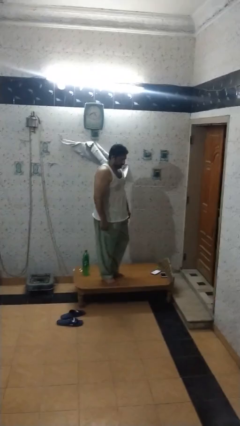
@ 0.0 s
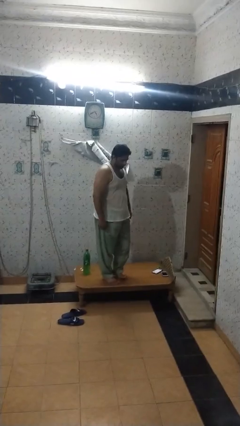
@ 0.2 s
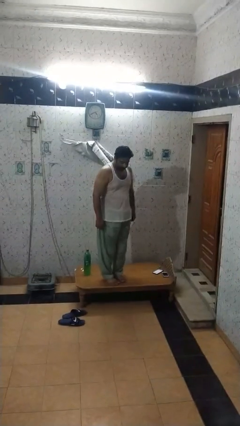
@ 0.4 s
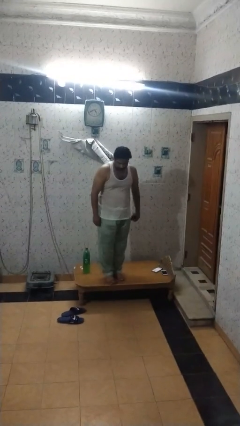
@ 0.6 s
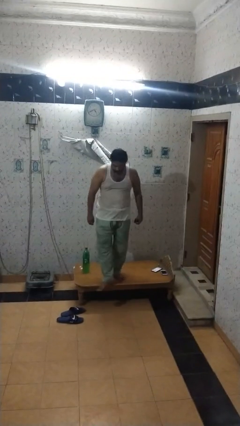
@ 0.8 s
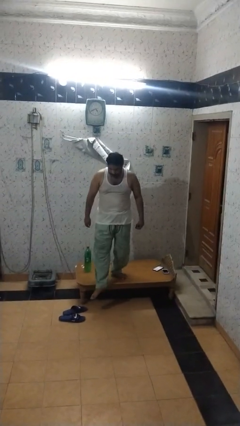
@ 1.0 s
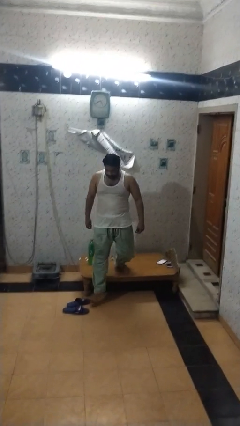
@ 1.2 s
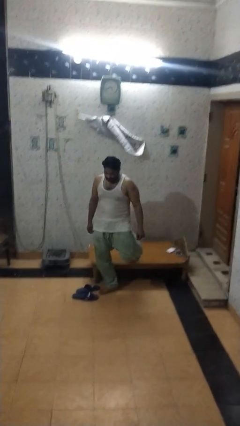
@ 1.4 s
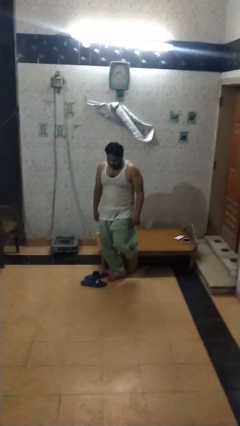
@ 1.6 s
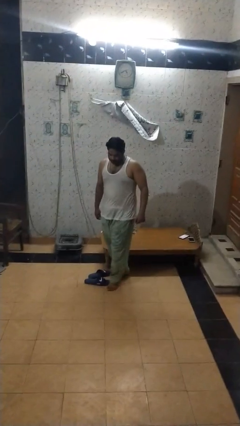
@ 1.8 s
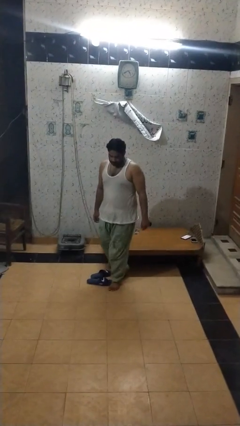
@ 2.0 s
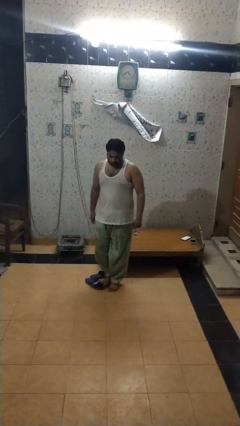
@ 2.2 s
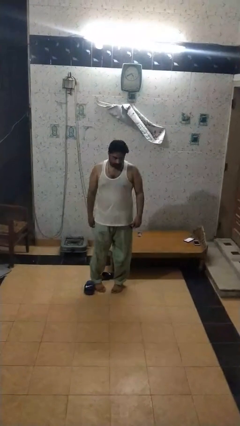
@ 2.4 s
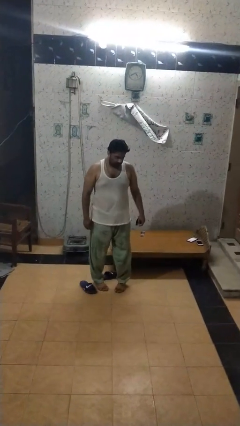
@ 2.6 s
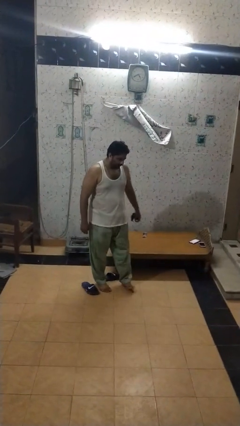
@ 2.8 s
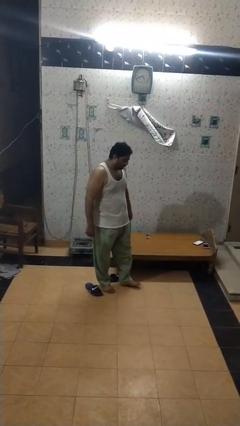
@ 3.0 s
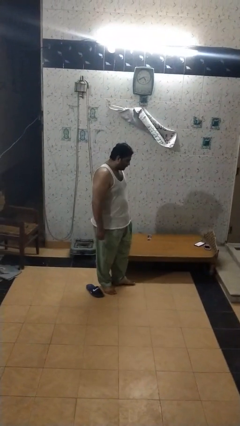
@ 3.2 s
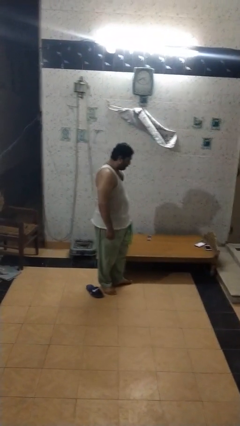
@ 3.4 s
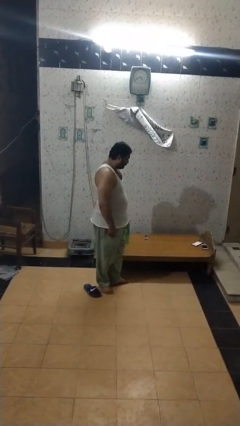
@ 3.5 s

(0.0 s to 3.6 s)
person climbs off table

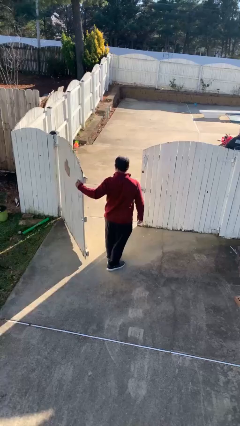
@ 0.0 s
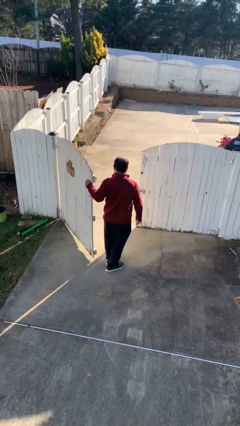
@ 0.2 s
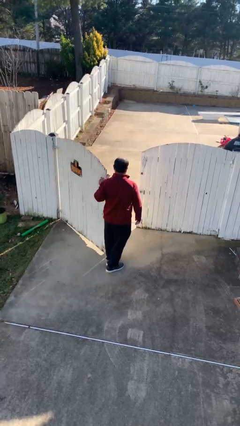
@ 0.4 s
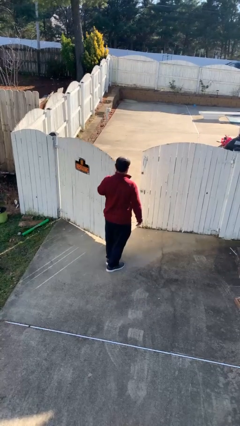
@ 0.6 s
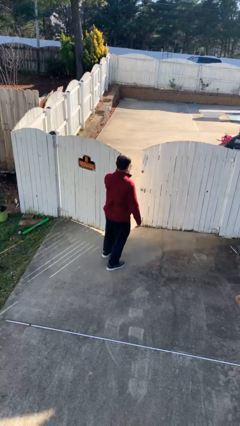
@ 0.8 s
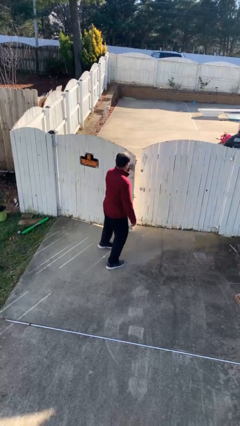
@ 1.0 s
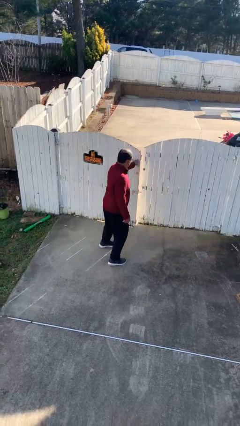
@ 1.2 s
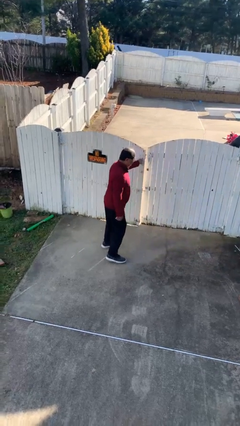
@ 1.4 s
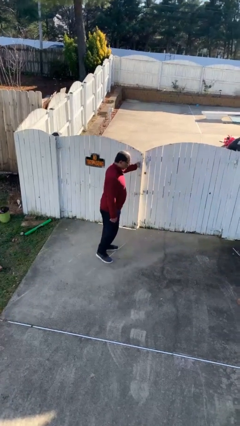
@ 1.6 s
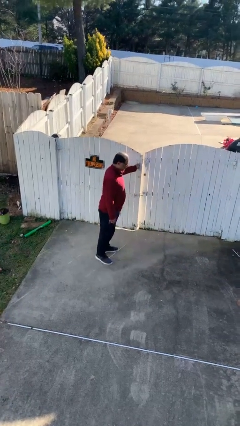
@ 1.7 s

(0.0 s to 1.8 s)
person closes facility door

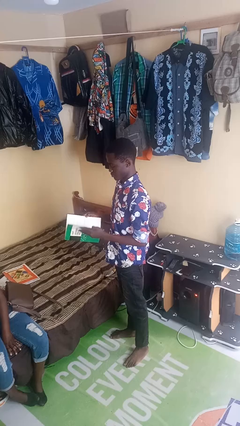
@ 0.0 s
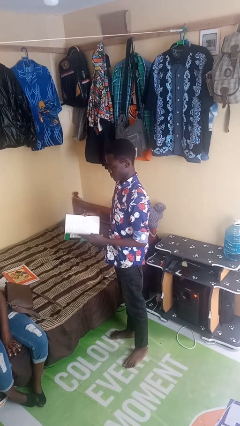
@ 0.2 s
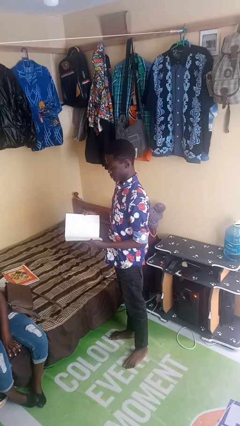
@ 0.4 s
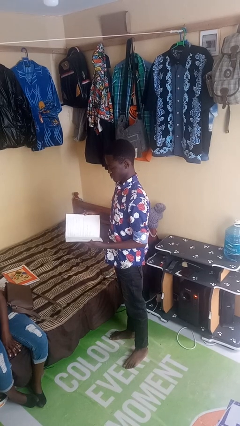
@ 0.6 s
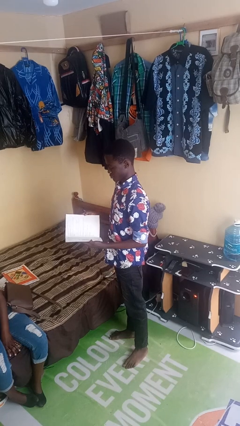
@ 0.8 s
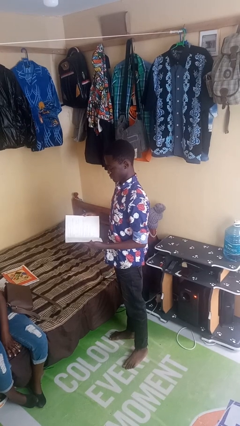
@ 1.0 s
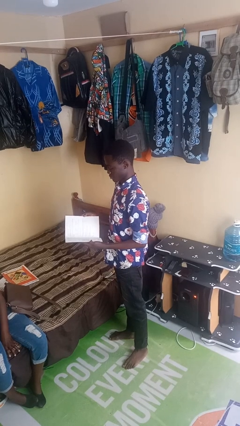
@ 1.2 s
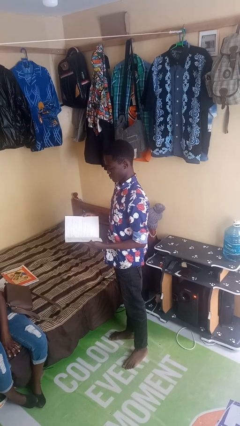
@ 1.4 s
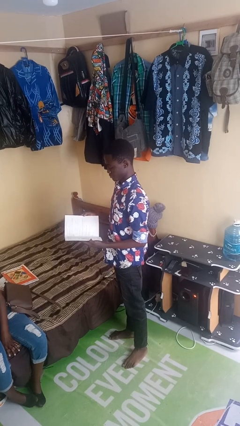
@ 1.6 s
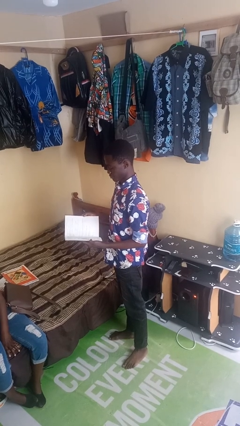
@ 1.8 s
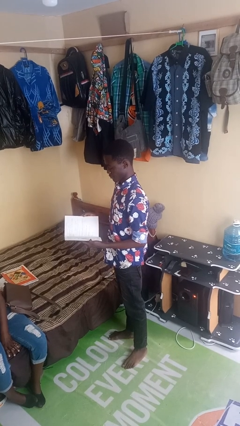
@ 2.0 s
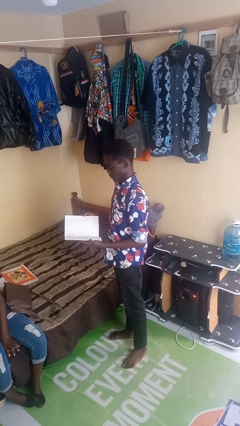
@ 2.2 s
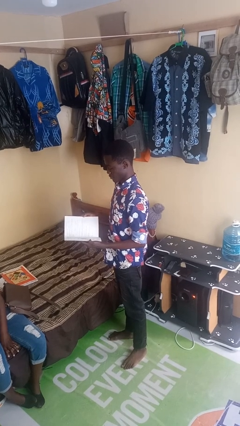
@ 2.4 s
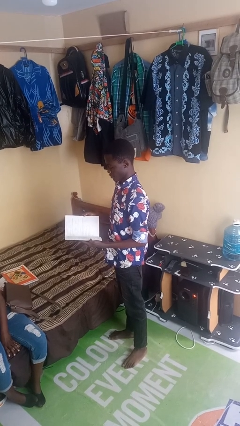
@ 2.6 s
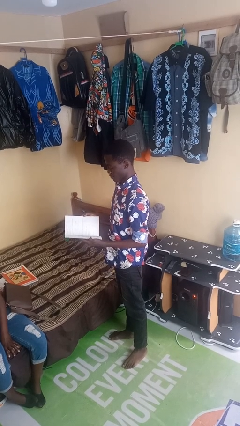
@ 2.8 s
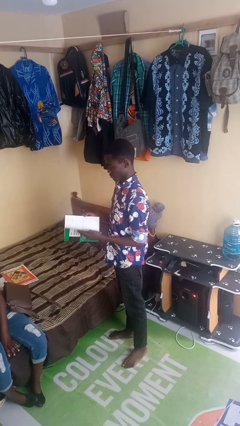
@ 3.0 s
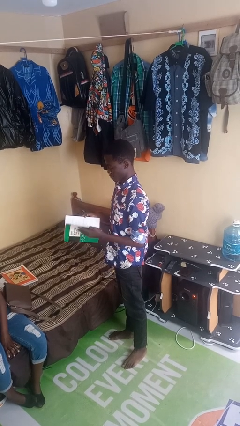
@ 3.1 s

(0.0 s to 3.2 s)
person reads magazine

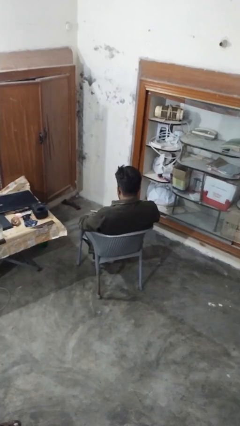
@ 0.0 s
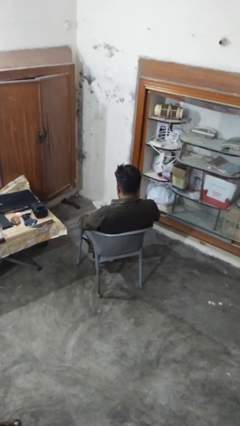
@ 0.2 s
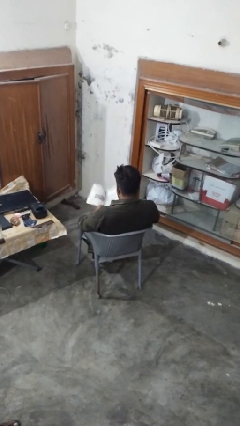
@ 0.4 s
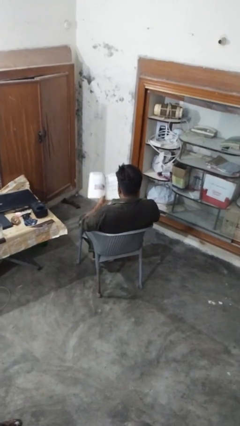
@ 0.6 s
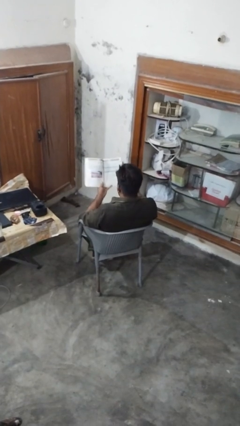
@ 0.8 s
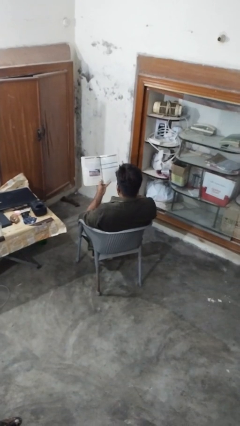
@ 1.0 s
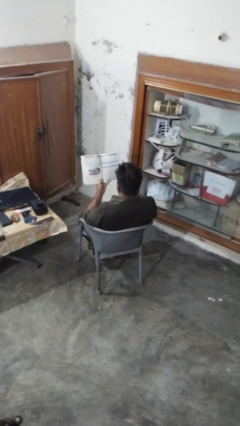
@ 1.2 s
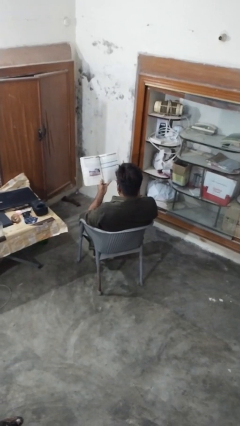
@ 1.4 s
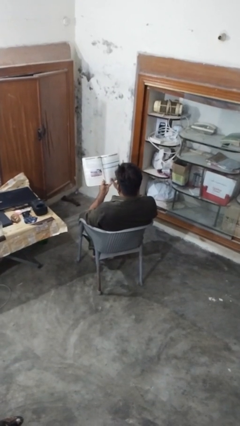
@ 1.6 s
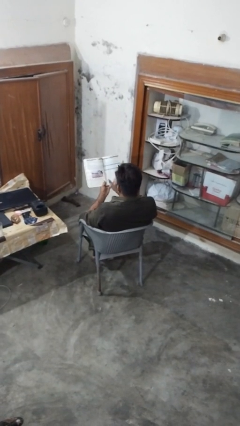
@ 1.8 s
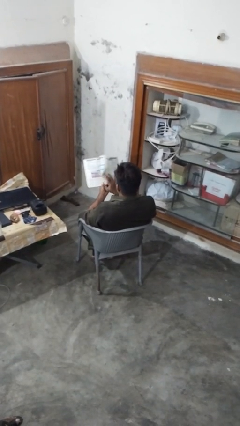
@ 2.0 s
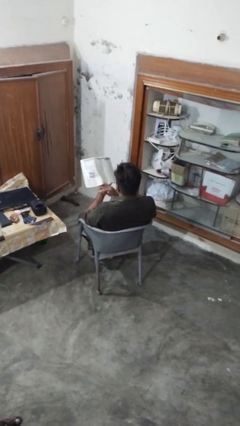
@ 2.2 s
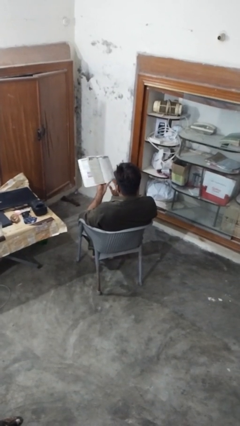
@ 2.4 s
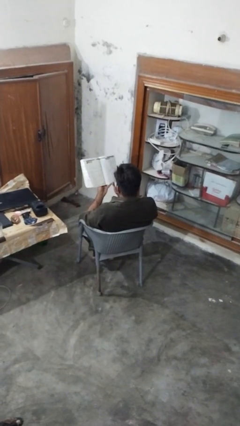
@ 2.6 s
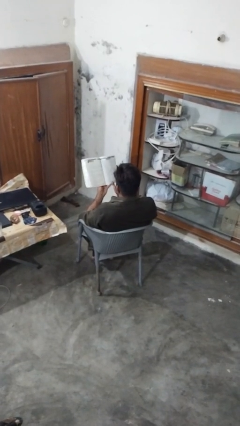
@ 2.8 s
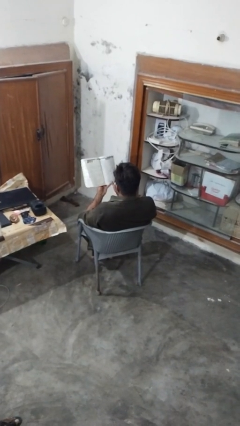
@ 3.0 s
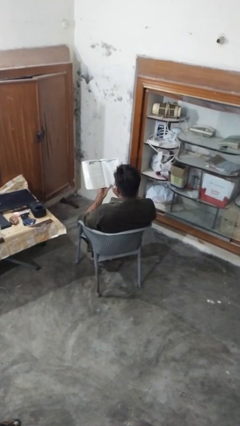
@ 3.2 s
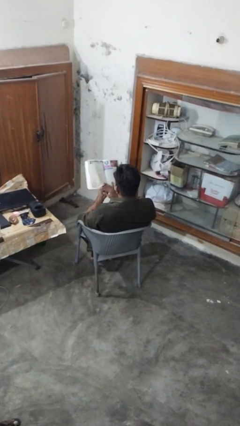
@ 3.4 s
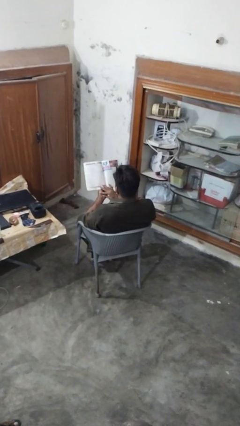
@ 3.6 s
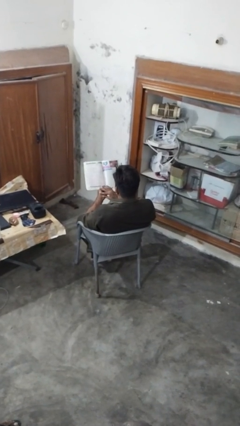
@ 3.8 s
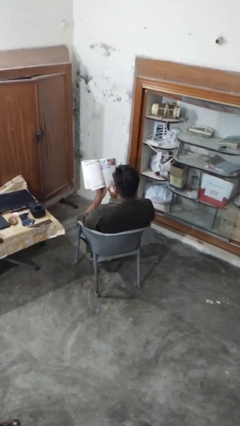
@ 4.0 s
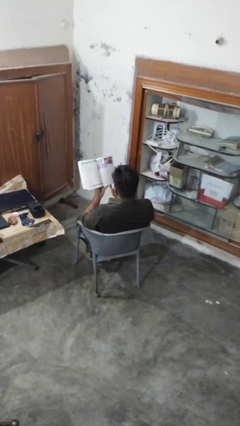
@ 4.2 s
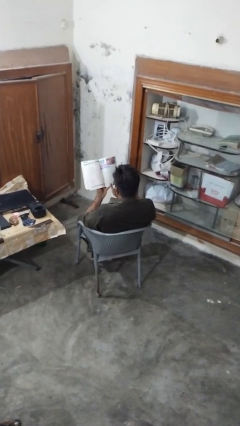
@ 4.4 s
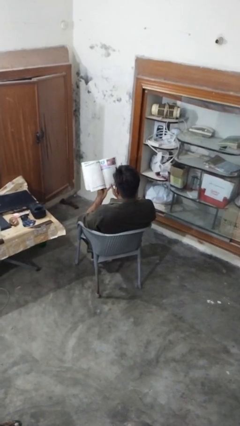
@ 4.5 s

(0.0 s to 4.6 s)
person reads book

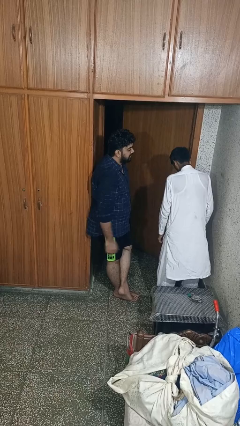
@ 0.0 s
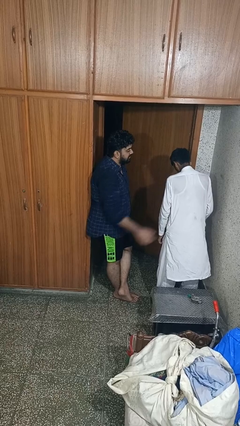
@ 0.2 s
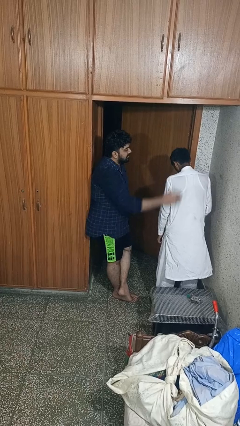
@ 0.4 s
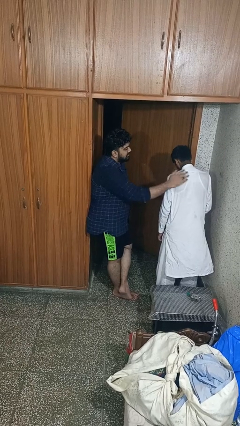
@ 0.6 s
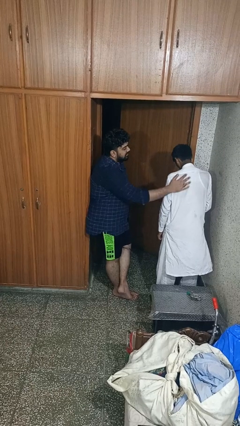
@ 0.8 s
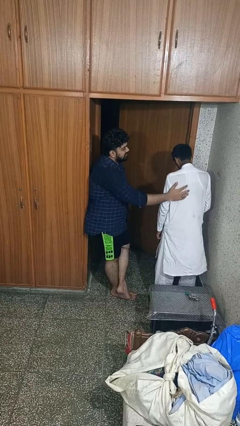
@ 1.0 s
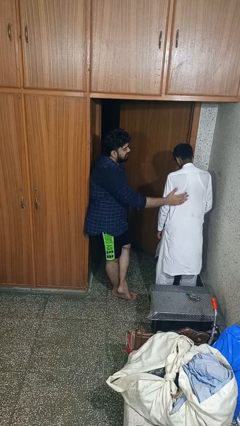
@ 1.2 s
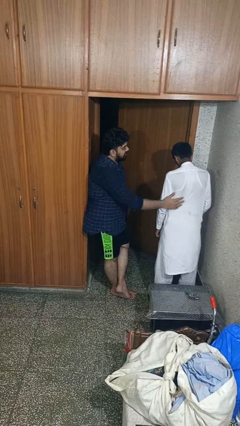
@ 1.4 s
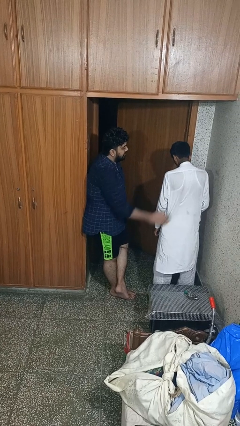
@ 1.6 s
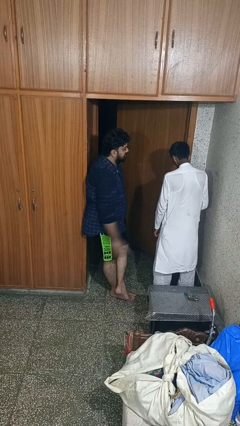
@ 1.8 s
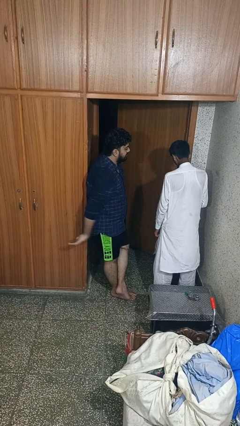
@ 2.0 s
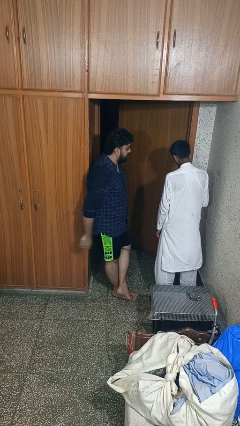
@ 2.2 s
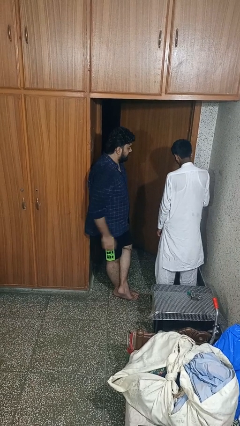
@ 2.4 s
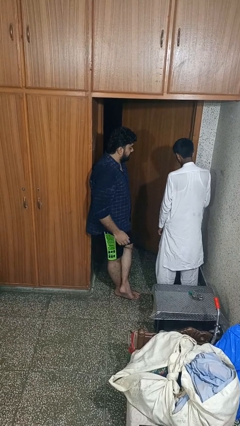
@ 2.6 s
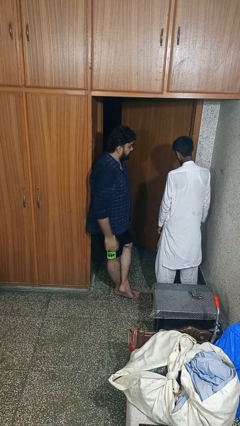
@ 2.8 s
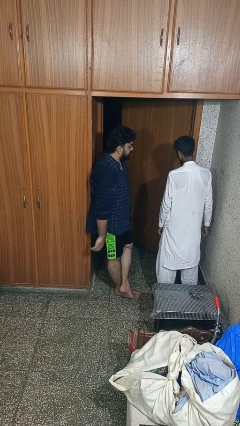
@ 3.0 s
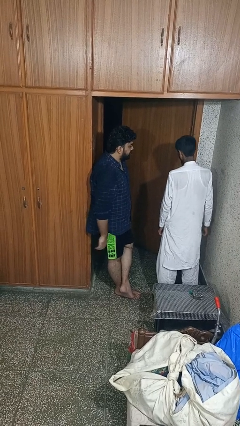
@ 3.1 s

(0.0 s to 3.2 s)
person touches back of person

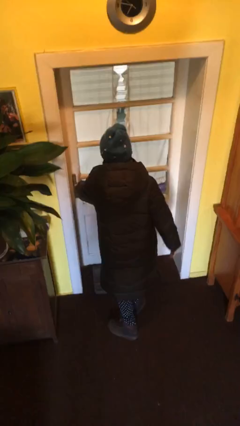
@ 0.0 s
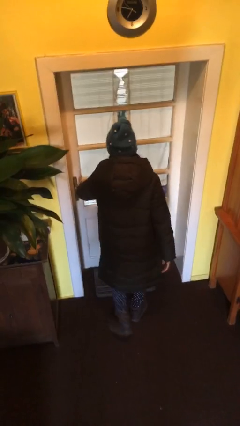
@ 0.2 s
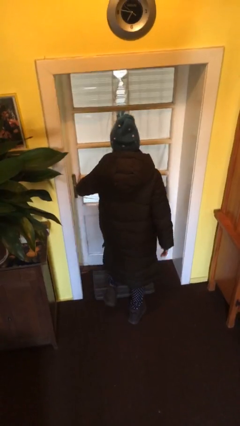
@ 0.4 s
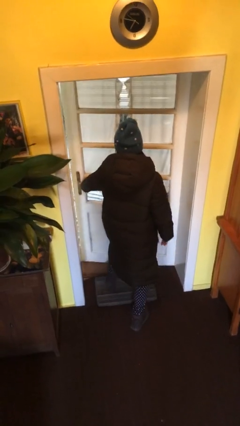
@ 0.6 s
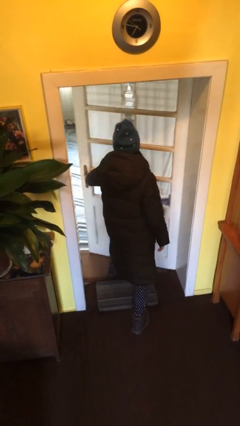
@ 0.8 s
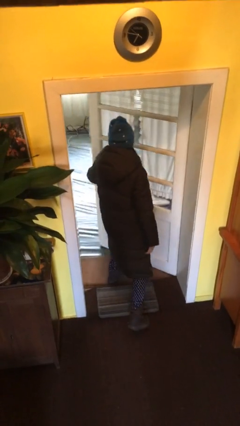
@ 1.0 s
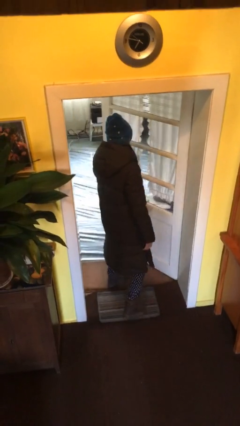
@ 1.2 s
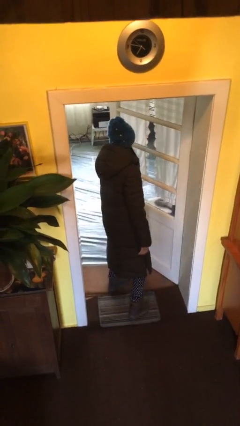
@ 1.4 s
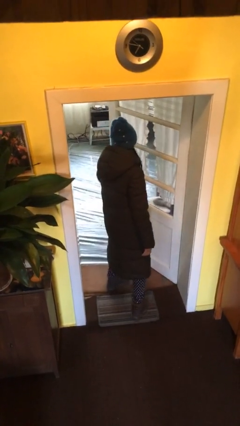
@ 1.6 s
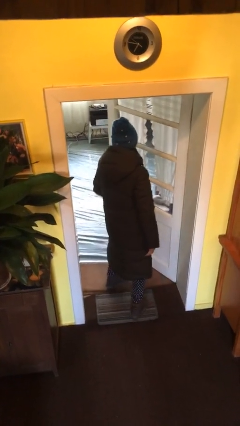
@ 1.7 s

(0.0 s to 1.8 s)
person opens facility door
